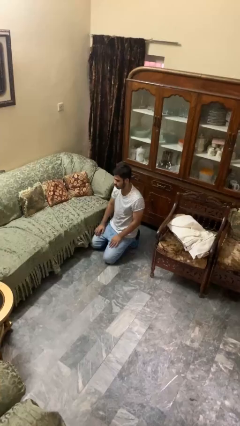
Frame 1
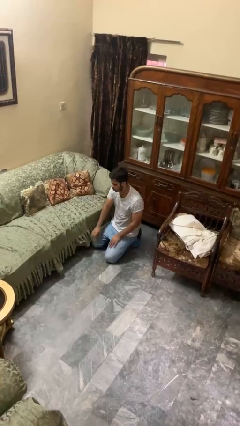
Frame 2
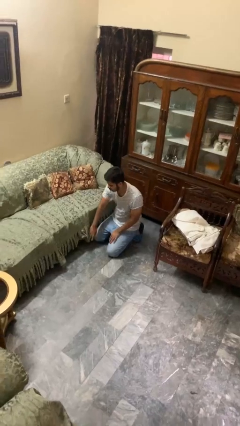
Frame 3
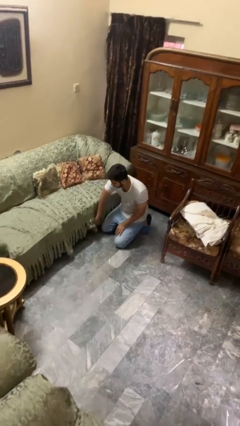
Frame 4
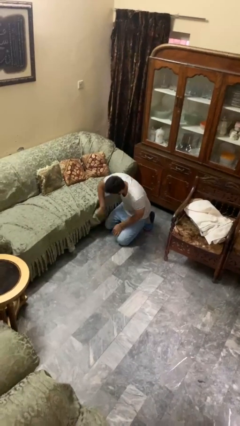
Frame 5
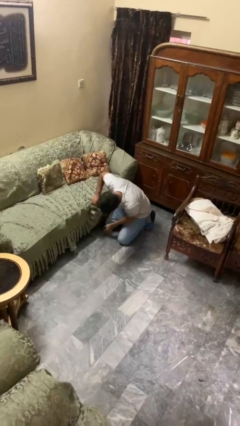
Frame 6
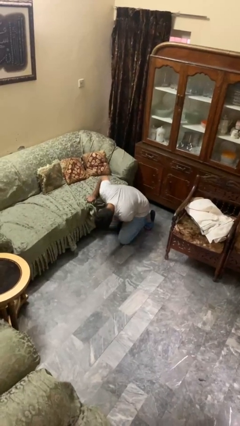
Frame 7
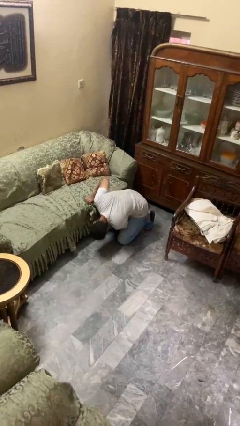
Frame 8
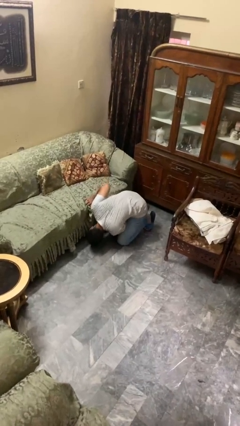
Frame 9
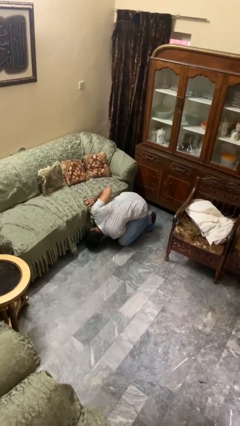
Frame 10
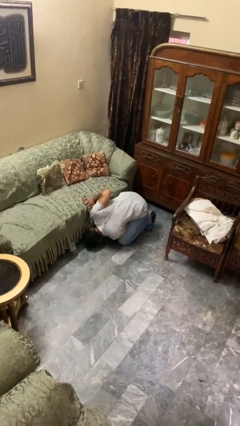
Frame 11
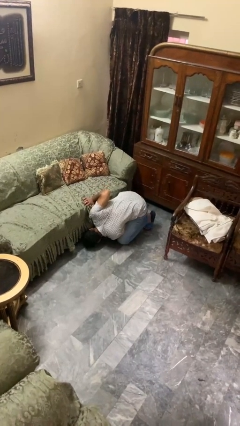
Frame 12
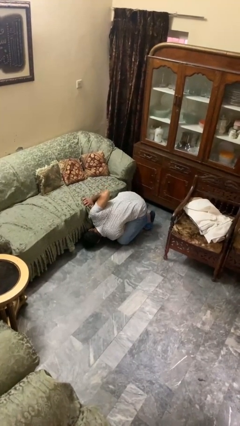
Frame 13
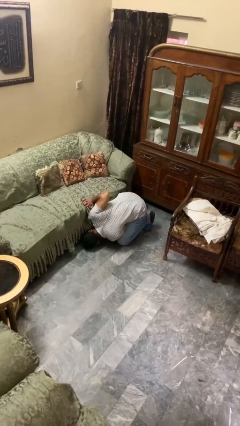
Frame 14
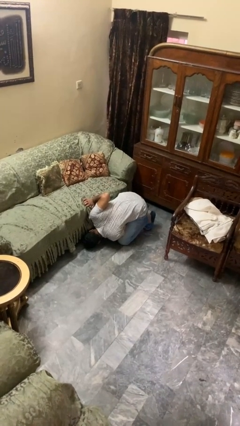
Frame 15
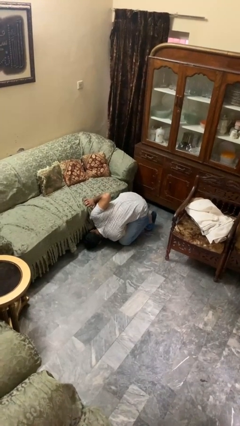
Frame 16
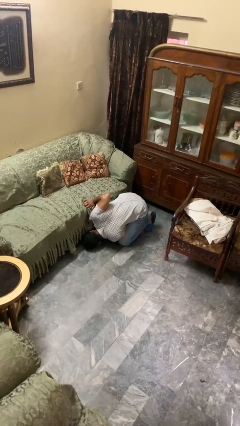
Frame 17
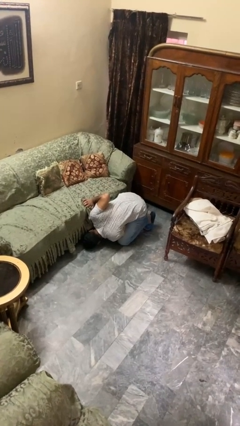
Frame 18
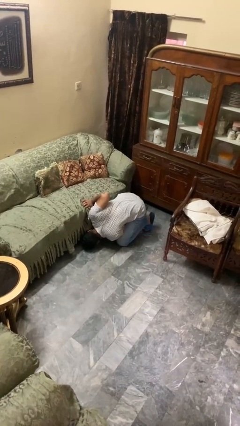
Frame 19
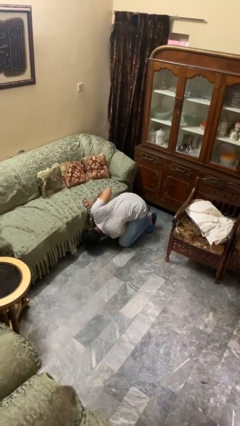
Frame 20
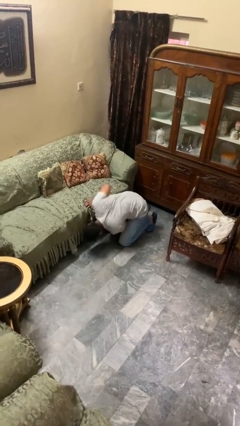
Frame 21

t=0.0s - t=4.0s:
person searches under couch

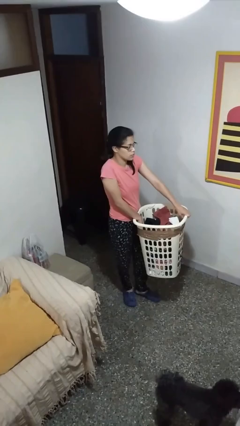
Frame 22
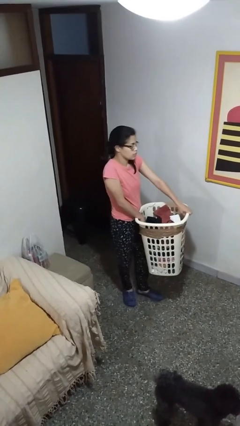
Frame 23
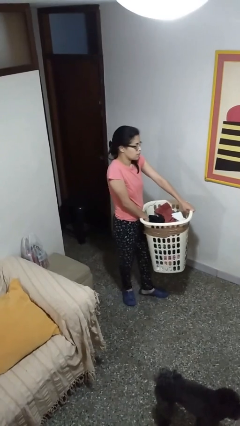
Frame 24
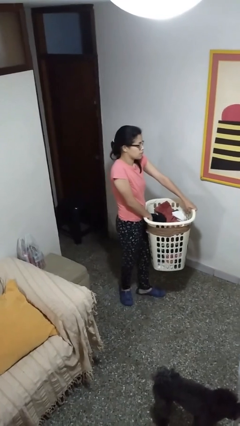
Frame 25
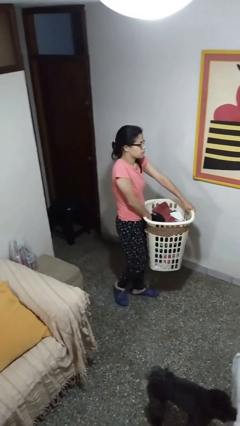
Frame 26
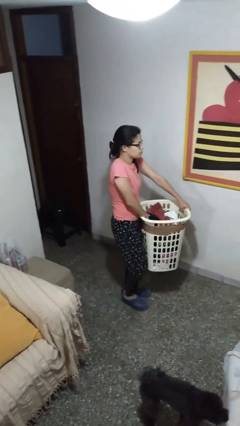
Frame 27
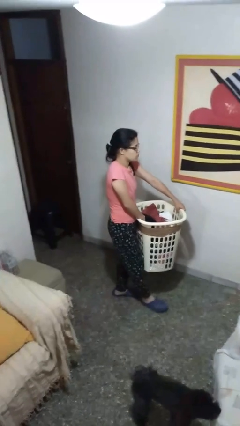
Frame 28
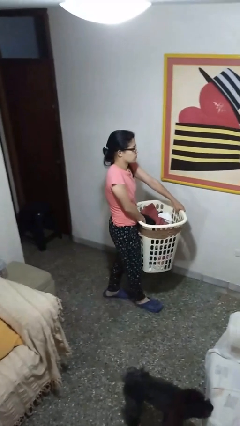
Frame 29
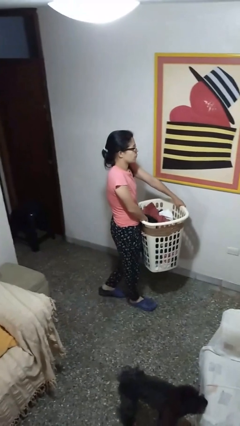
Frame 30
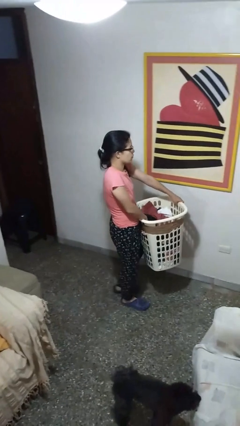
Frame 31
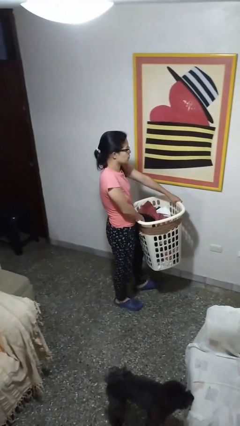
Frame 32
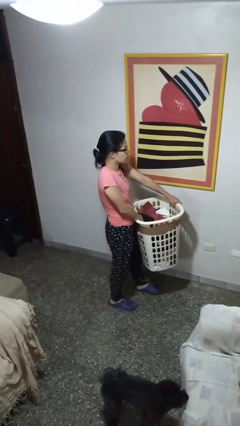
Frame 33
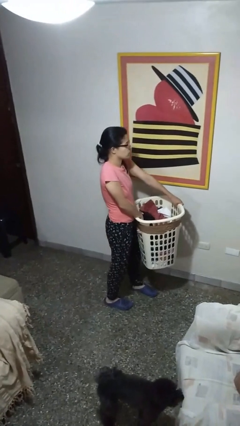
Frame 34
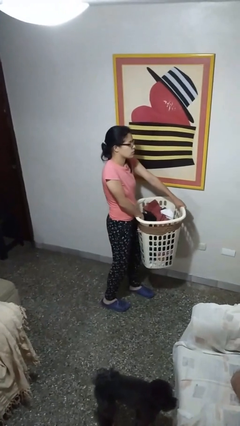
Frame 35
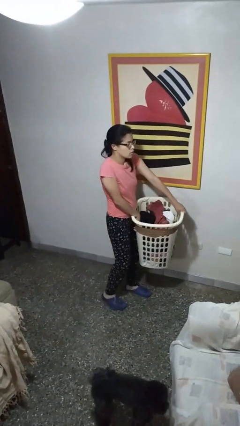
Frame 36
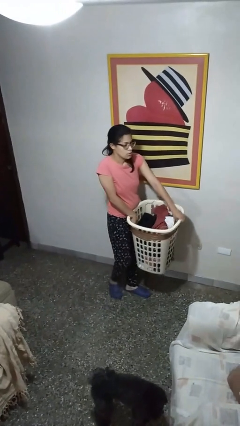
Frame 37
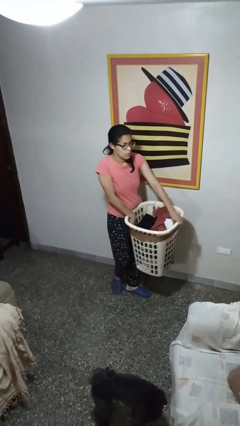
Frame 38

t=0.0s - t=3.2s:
person carries laundry basket

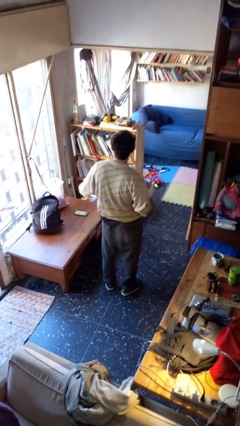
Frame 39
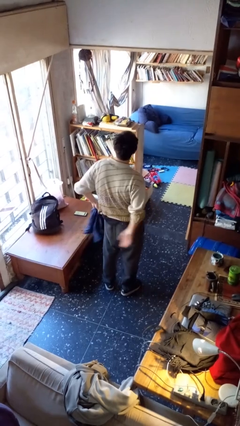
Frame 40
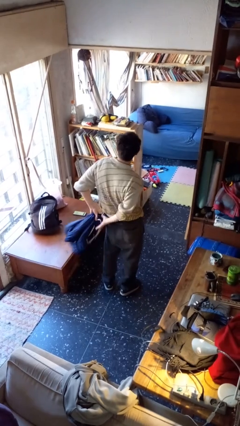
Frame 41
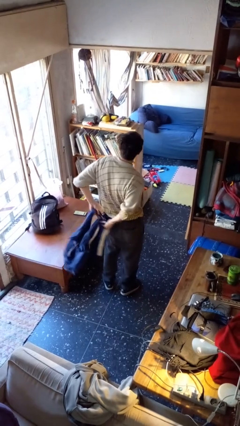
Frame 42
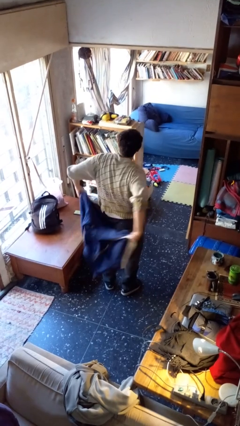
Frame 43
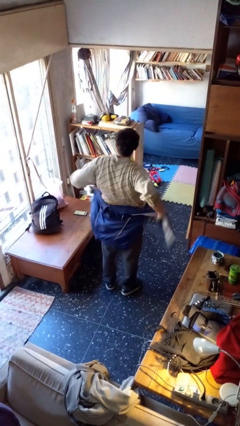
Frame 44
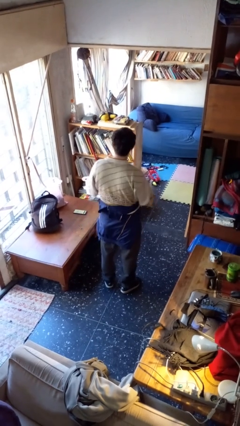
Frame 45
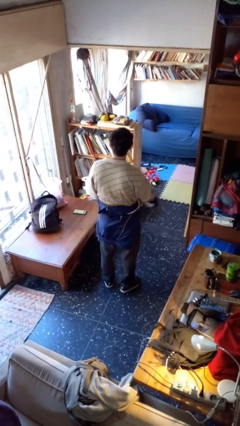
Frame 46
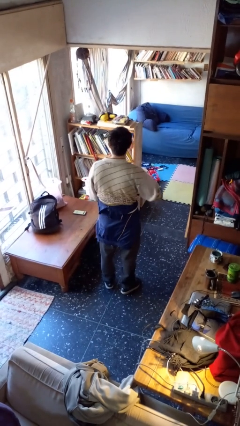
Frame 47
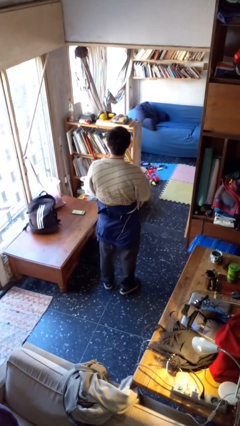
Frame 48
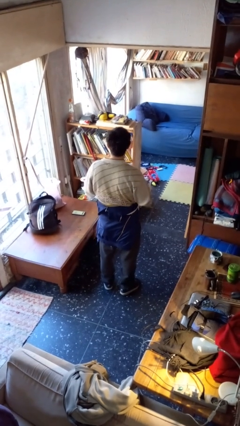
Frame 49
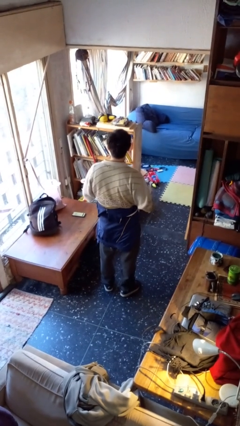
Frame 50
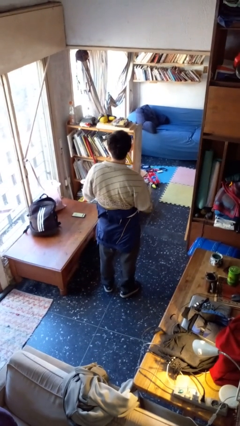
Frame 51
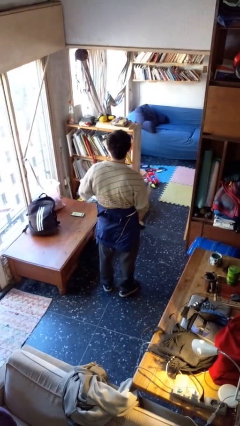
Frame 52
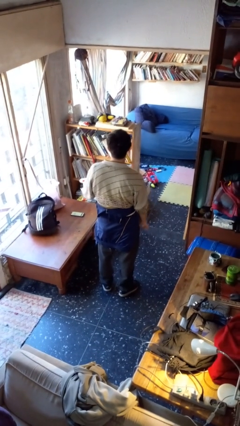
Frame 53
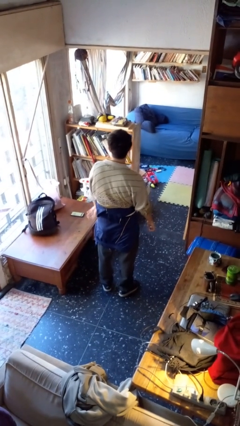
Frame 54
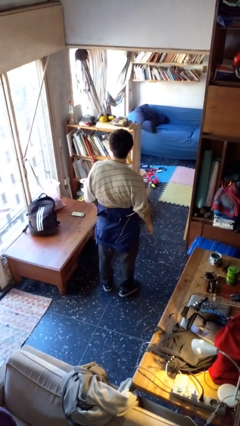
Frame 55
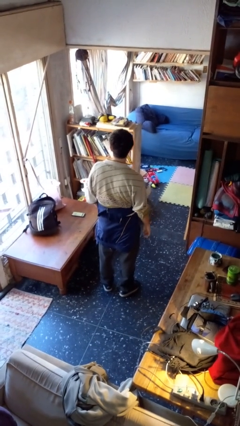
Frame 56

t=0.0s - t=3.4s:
person ties jacket around waist

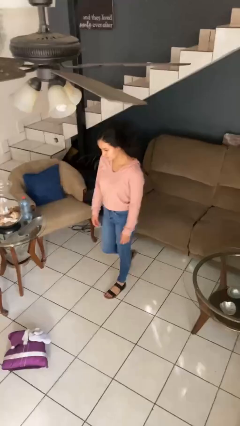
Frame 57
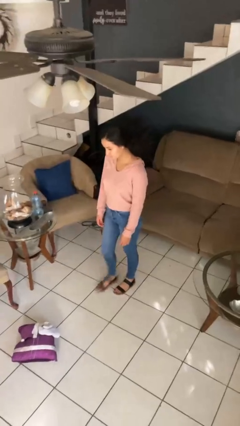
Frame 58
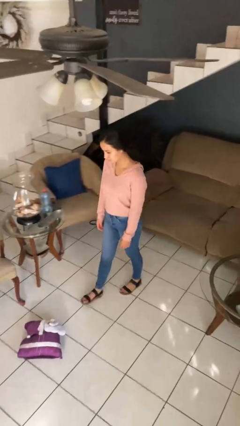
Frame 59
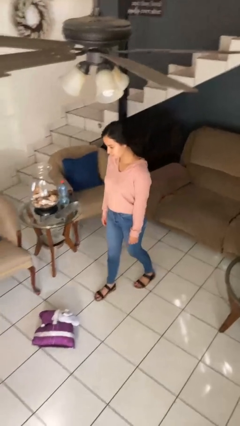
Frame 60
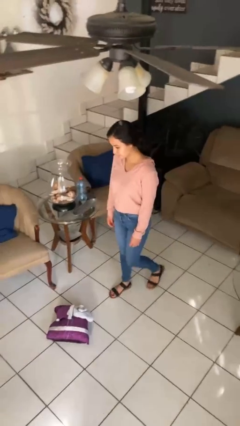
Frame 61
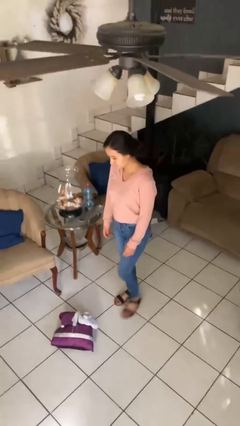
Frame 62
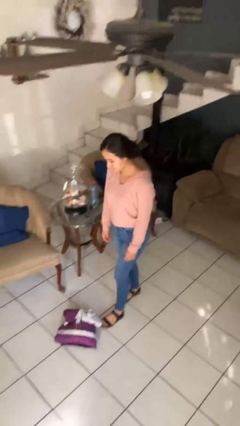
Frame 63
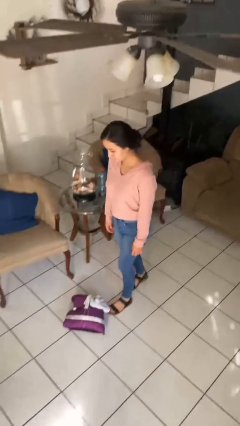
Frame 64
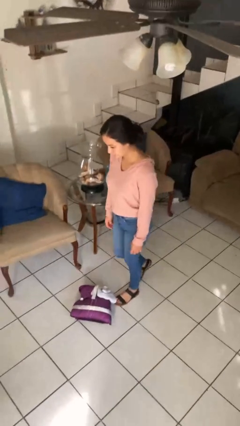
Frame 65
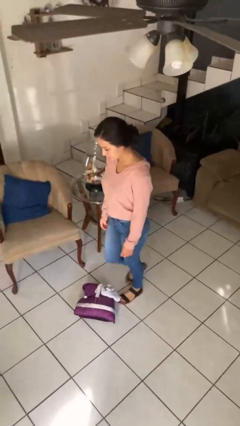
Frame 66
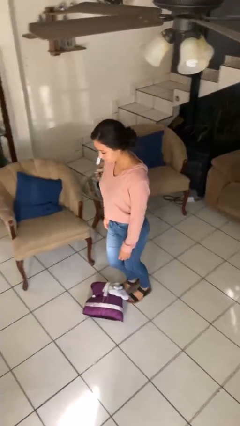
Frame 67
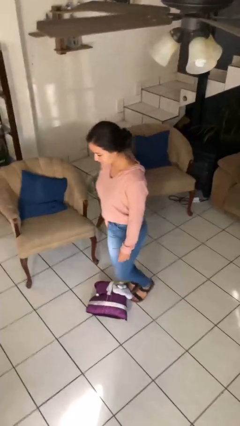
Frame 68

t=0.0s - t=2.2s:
person trips on object on floor

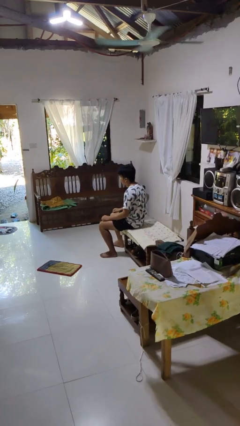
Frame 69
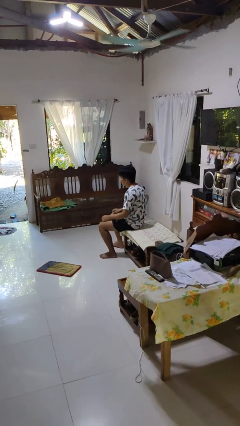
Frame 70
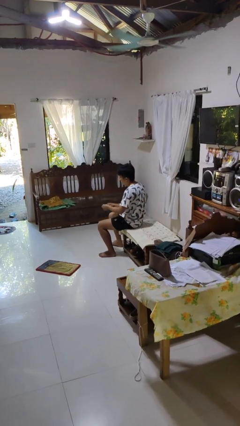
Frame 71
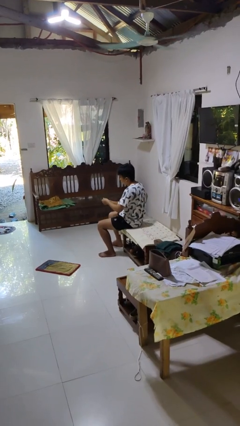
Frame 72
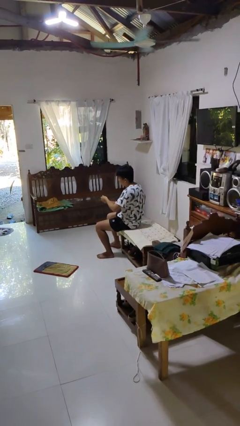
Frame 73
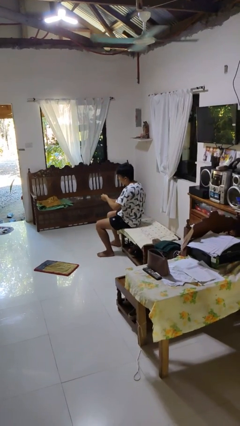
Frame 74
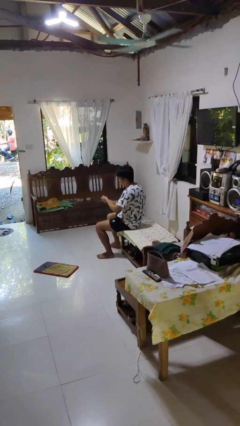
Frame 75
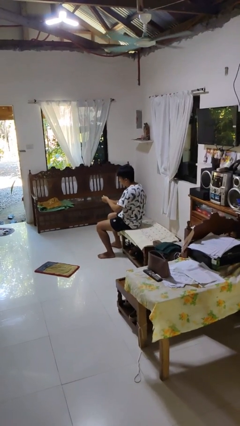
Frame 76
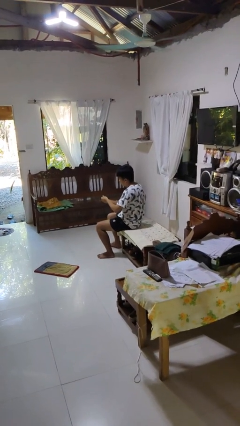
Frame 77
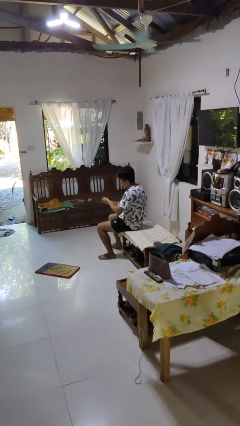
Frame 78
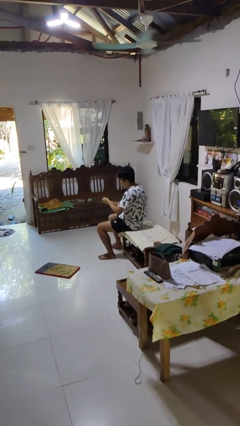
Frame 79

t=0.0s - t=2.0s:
person clips fingernails

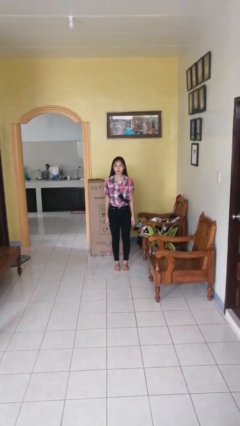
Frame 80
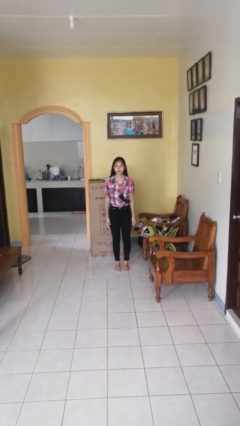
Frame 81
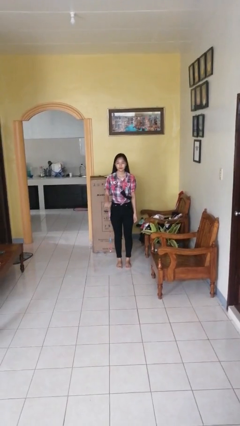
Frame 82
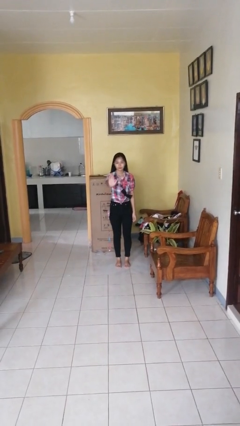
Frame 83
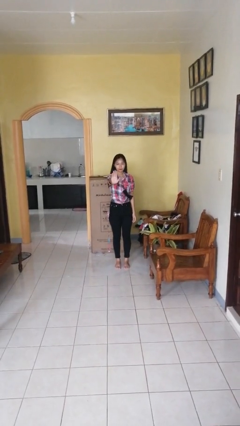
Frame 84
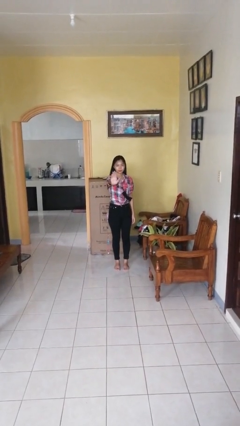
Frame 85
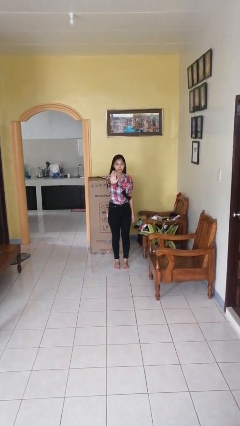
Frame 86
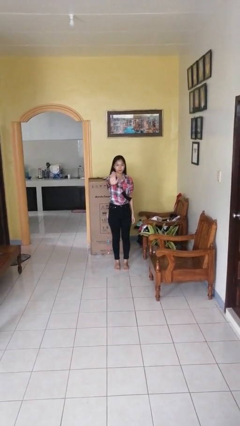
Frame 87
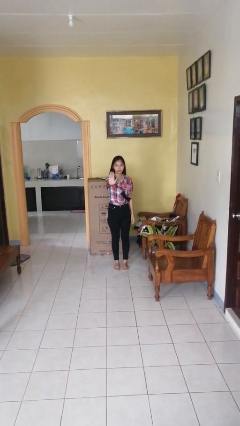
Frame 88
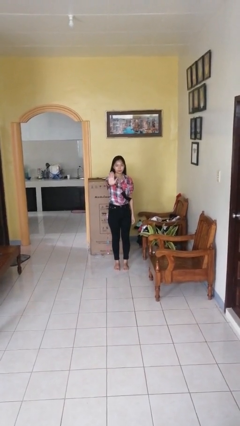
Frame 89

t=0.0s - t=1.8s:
person gestures stop

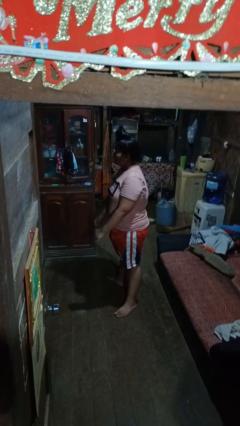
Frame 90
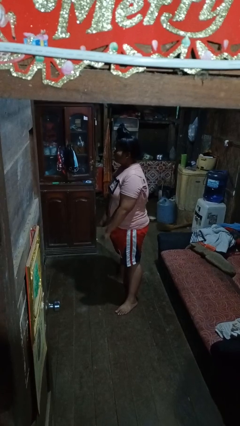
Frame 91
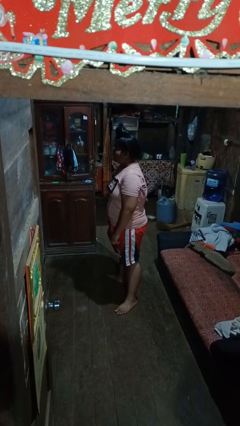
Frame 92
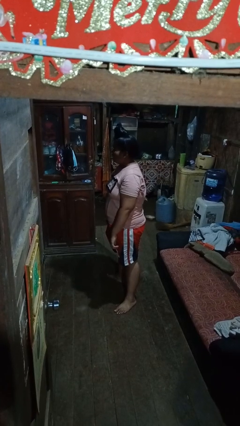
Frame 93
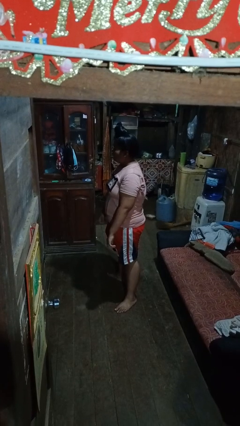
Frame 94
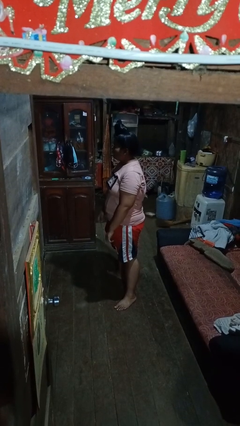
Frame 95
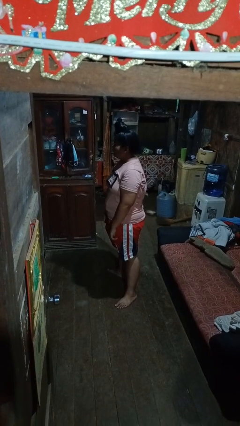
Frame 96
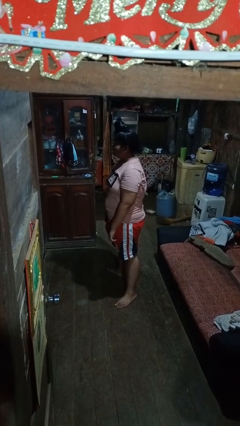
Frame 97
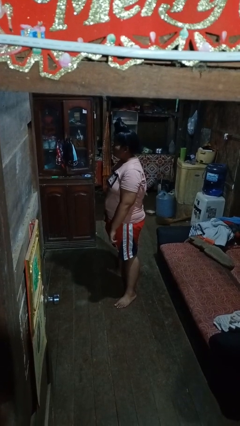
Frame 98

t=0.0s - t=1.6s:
person stands up
